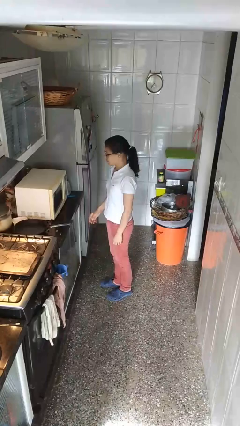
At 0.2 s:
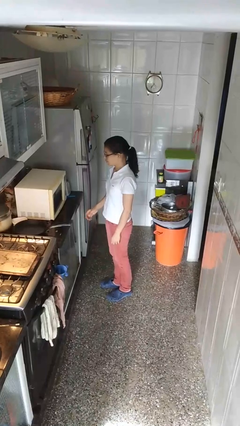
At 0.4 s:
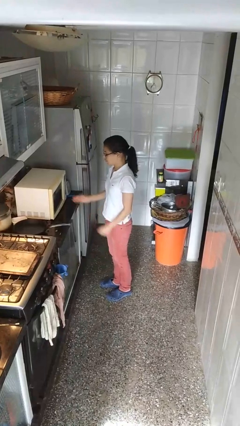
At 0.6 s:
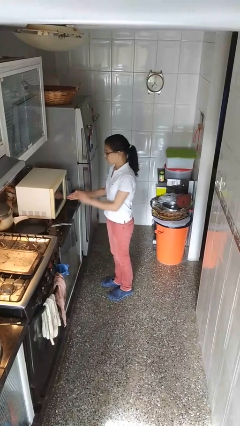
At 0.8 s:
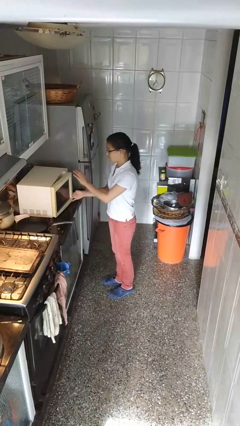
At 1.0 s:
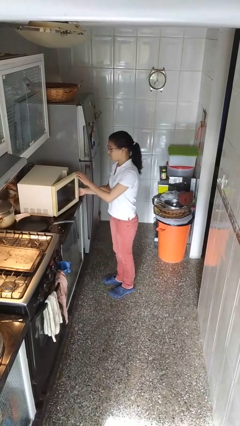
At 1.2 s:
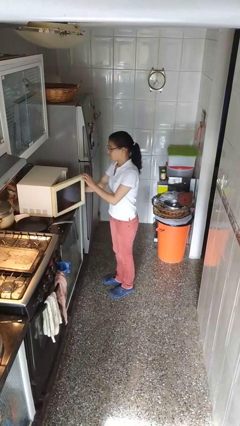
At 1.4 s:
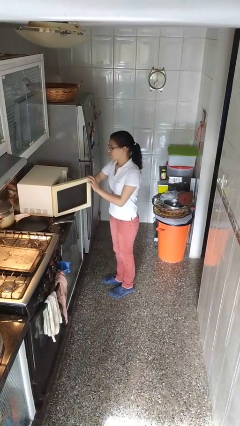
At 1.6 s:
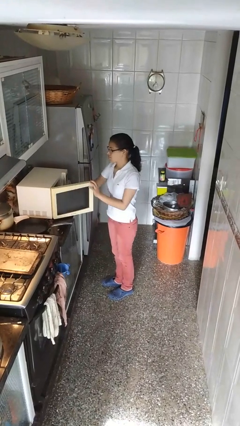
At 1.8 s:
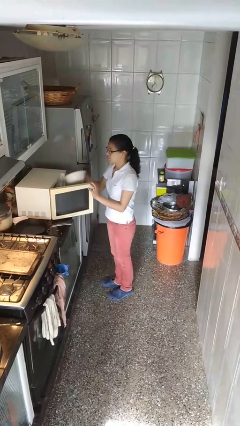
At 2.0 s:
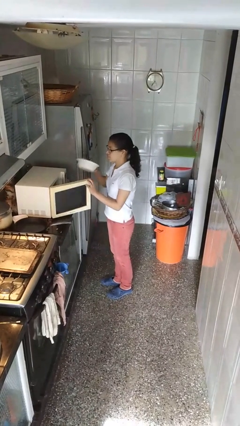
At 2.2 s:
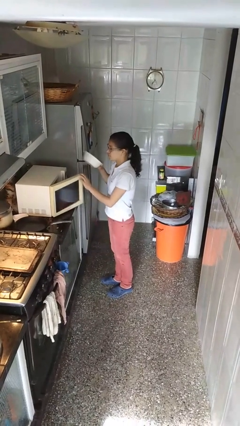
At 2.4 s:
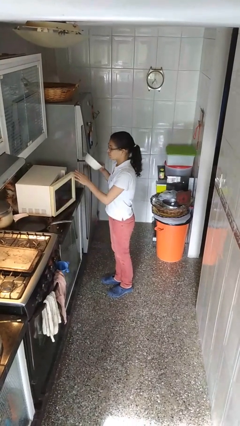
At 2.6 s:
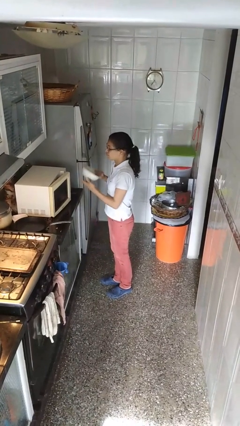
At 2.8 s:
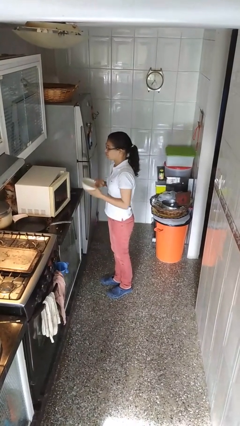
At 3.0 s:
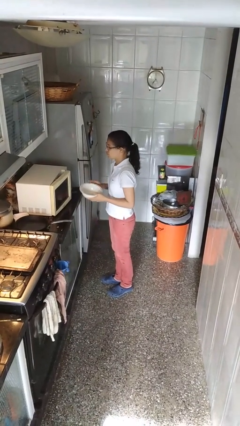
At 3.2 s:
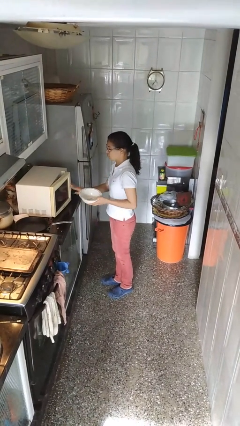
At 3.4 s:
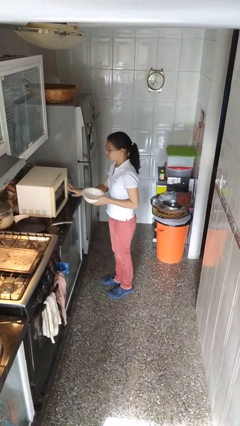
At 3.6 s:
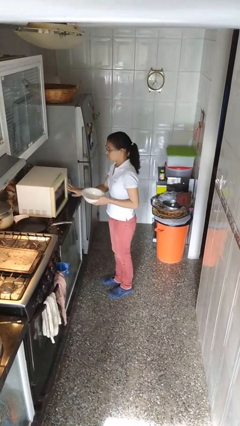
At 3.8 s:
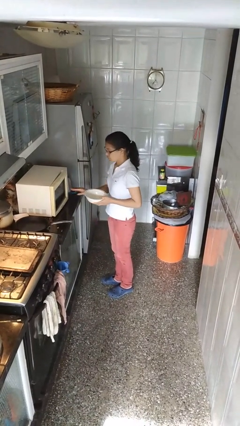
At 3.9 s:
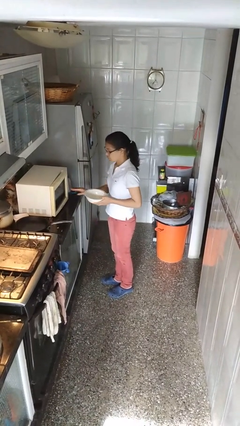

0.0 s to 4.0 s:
person takes object from microwave

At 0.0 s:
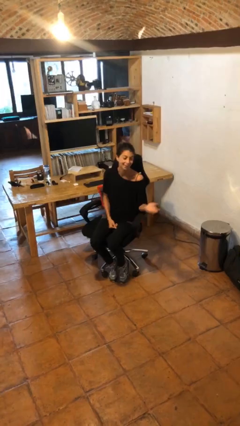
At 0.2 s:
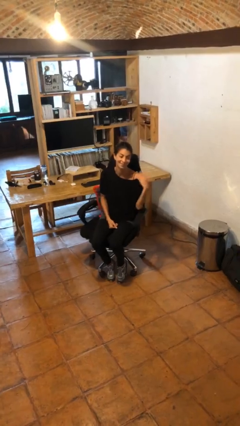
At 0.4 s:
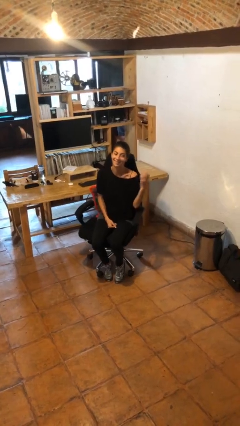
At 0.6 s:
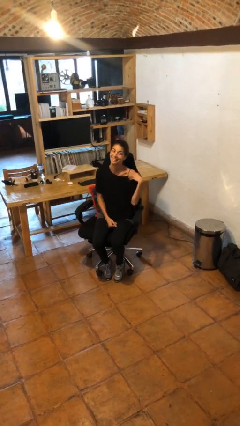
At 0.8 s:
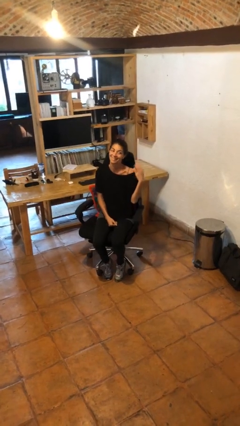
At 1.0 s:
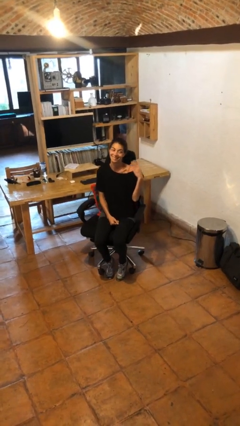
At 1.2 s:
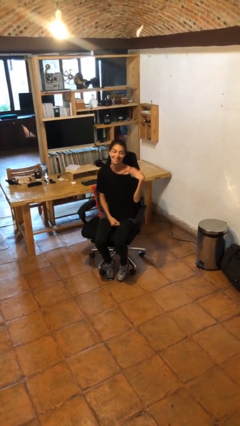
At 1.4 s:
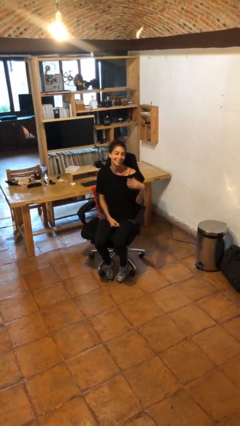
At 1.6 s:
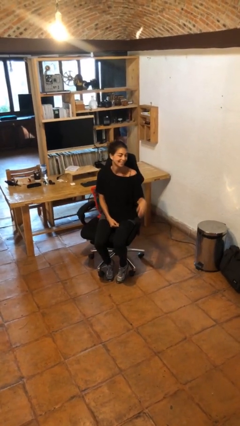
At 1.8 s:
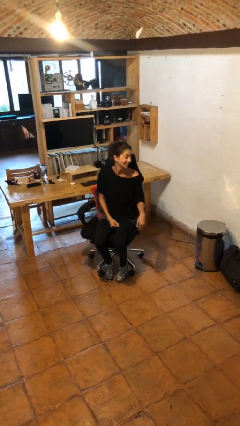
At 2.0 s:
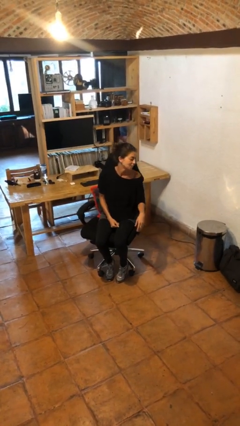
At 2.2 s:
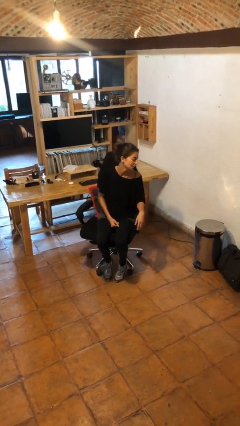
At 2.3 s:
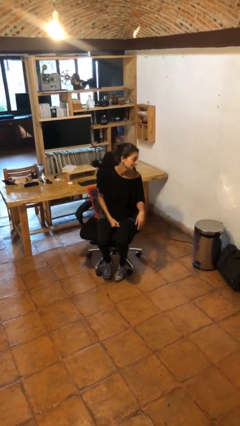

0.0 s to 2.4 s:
person gestures come here

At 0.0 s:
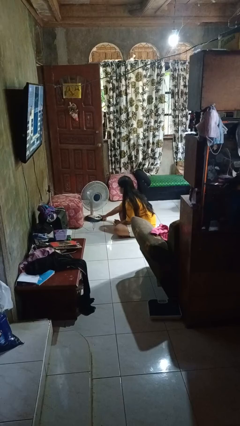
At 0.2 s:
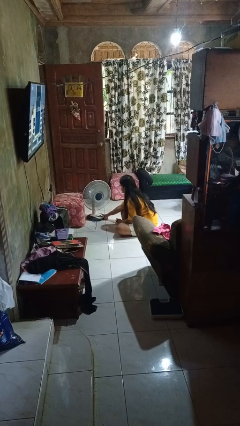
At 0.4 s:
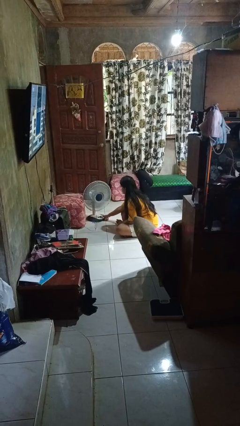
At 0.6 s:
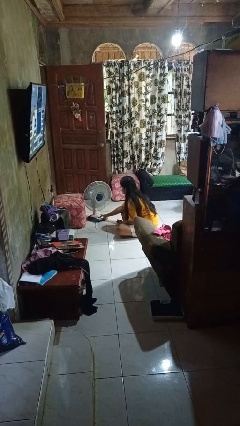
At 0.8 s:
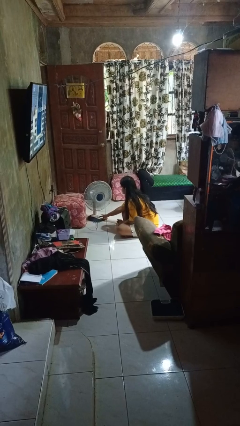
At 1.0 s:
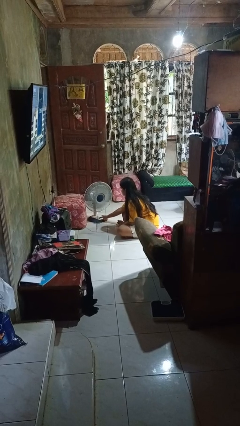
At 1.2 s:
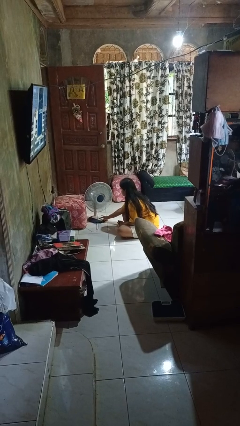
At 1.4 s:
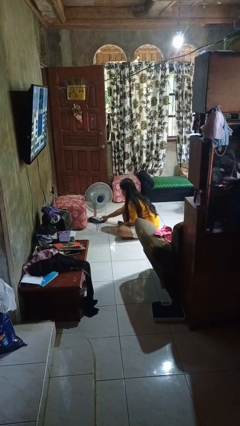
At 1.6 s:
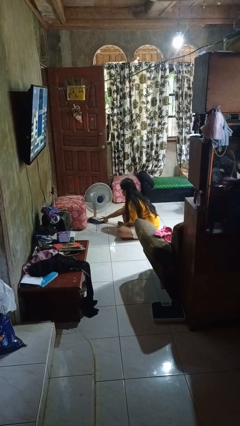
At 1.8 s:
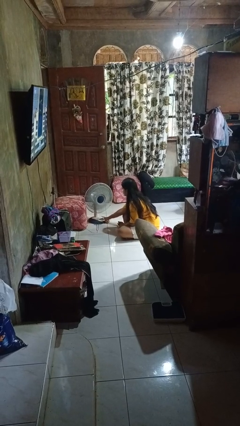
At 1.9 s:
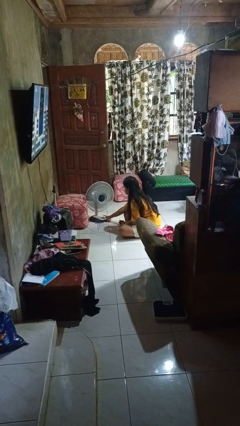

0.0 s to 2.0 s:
person turns off fan

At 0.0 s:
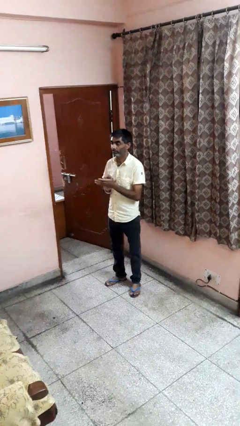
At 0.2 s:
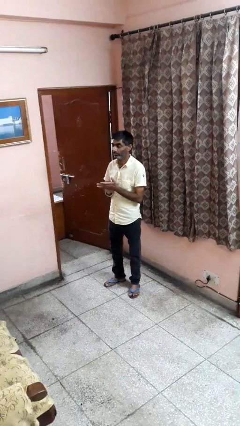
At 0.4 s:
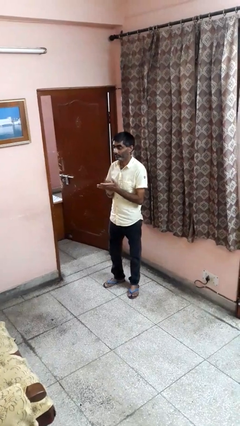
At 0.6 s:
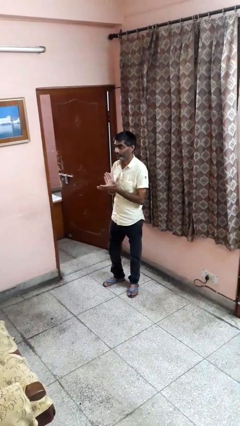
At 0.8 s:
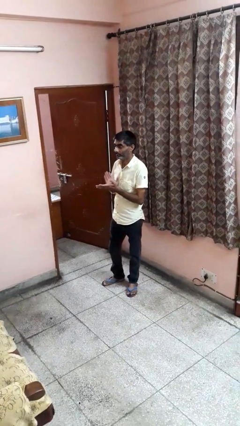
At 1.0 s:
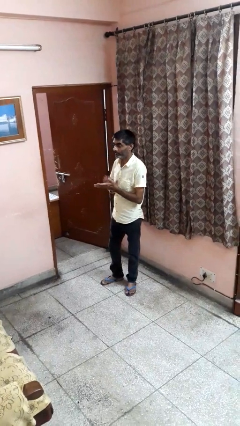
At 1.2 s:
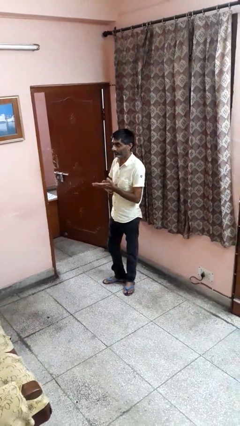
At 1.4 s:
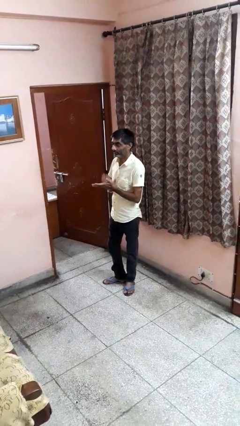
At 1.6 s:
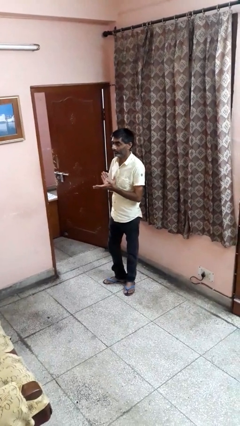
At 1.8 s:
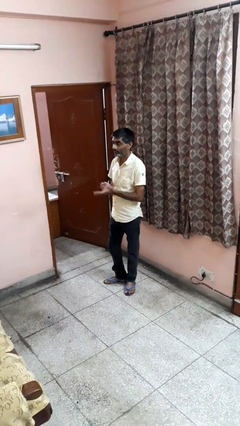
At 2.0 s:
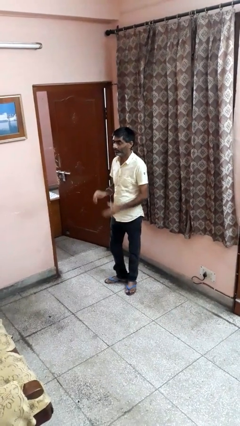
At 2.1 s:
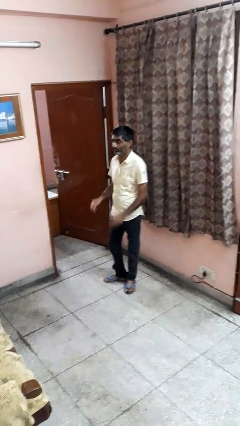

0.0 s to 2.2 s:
person claps hands

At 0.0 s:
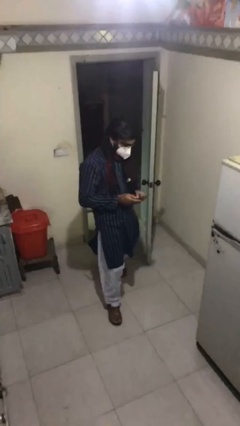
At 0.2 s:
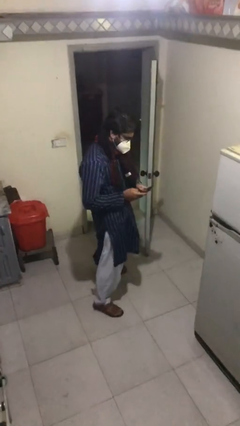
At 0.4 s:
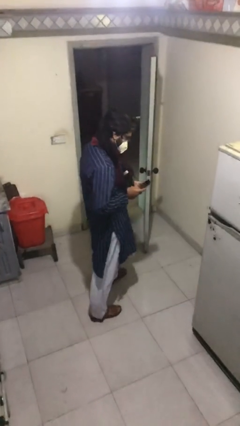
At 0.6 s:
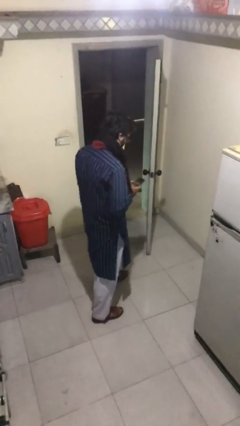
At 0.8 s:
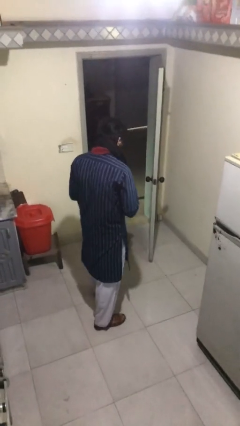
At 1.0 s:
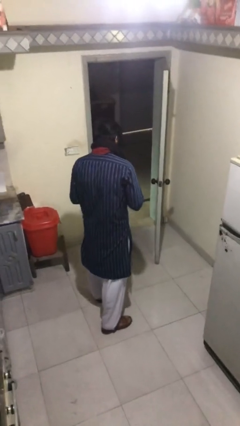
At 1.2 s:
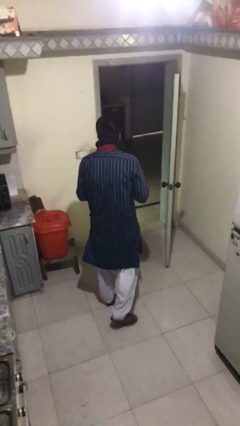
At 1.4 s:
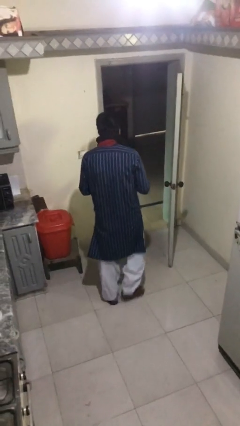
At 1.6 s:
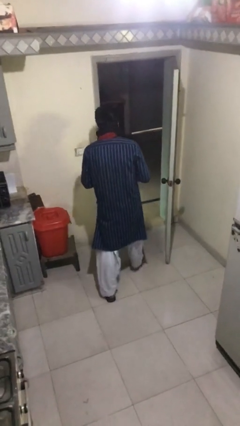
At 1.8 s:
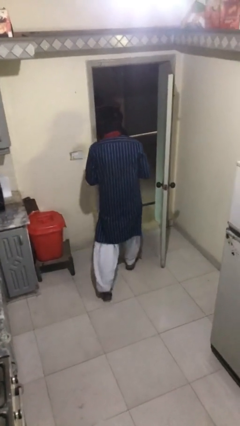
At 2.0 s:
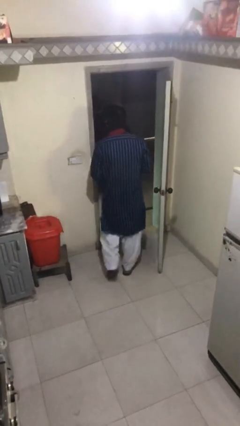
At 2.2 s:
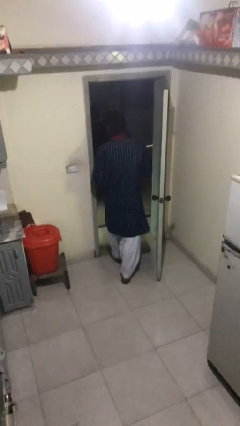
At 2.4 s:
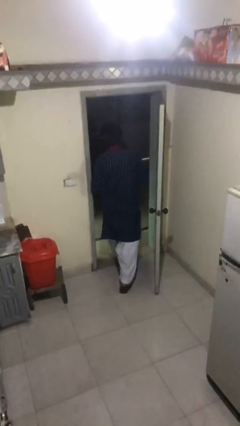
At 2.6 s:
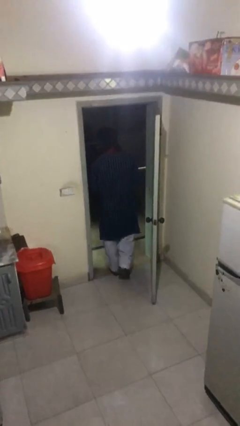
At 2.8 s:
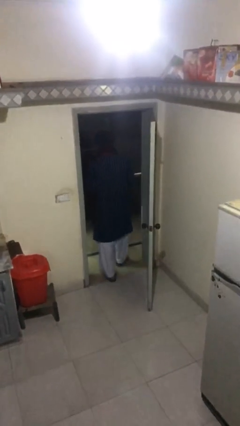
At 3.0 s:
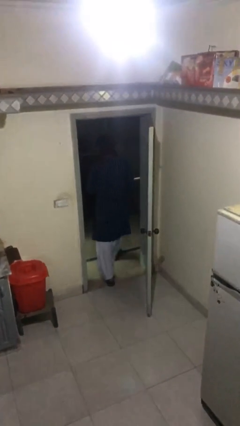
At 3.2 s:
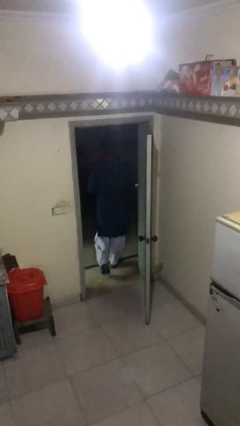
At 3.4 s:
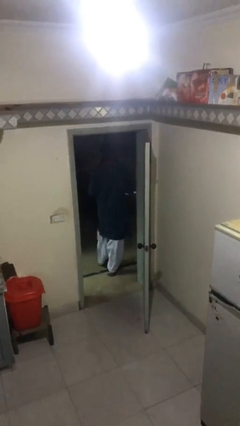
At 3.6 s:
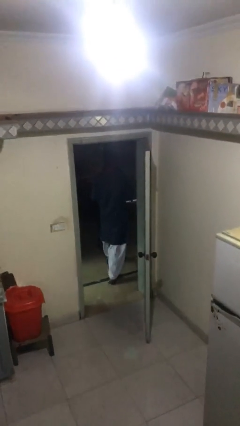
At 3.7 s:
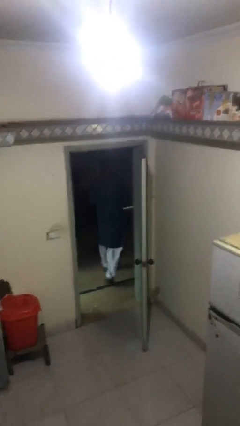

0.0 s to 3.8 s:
person exits scene through structure

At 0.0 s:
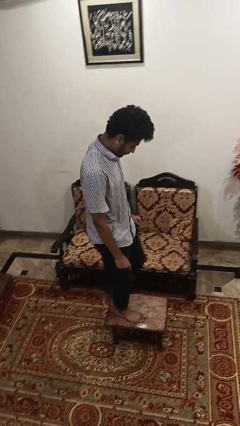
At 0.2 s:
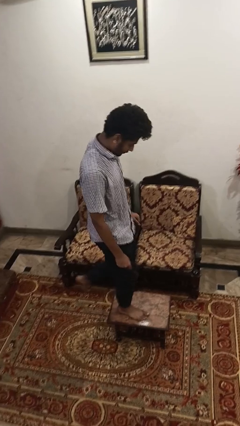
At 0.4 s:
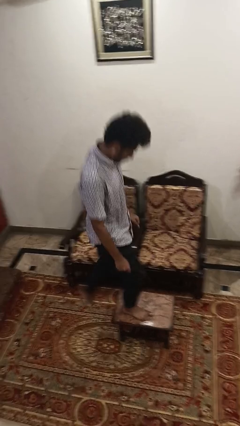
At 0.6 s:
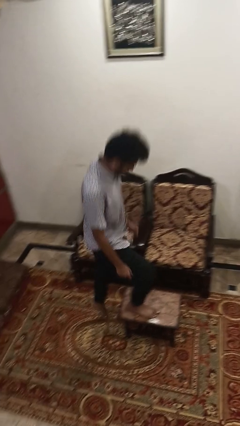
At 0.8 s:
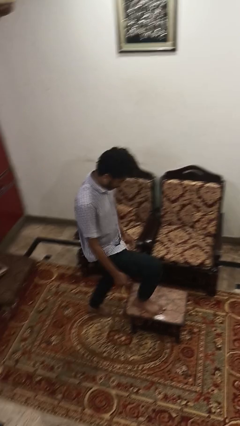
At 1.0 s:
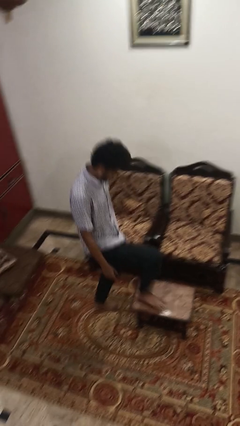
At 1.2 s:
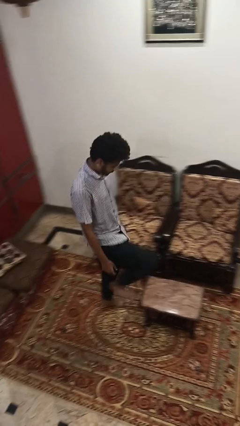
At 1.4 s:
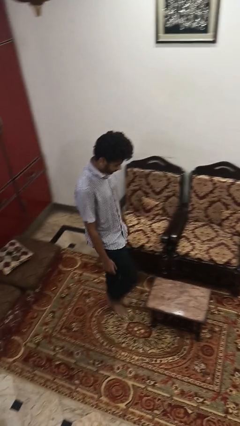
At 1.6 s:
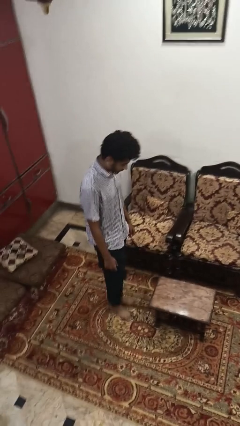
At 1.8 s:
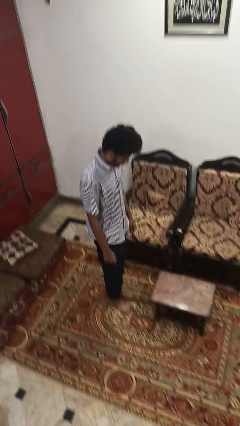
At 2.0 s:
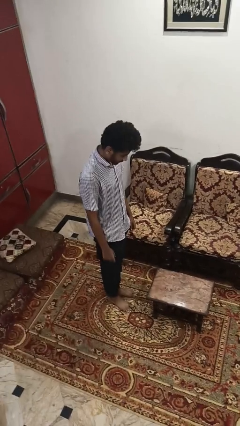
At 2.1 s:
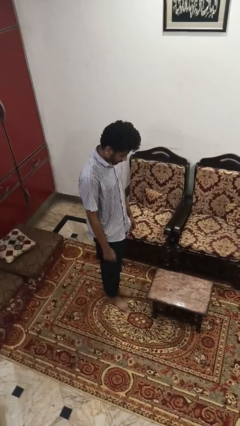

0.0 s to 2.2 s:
person climbs off table

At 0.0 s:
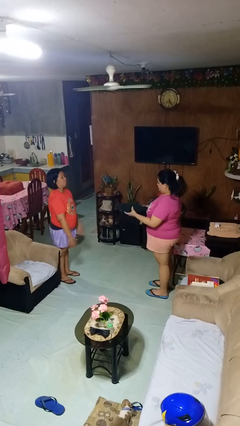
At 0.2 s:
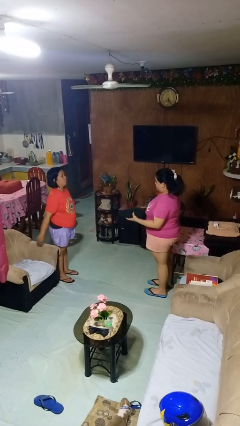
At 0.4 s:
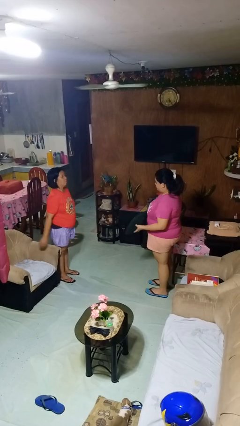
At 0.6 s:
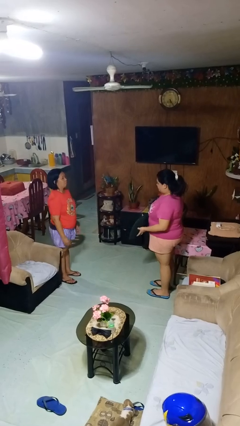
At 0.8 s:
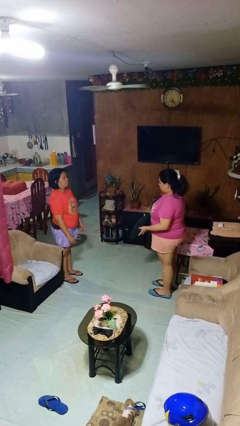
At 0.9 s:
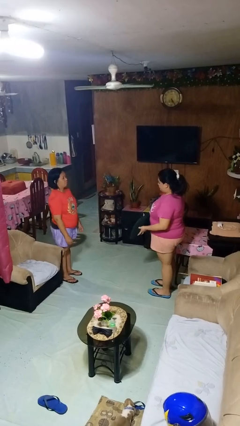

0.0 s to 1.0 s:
person catches object from person
